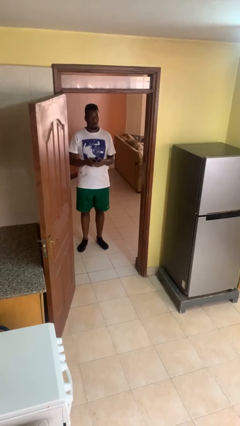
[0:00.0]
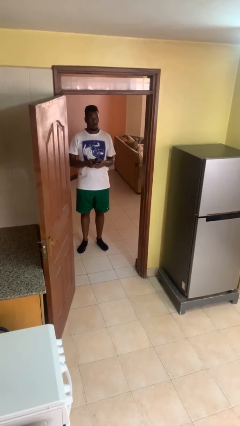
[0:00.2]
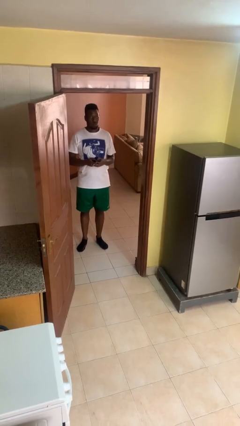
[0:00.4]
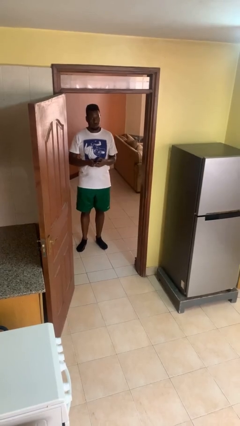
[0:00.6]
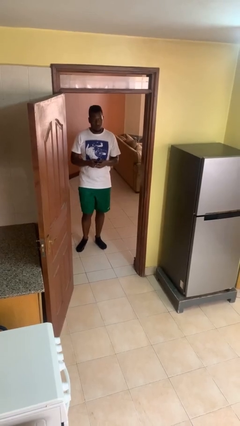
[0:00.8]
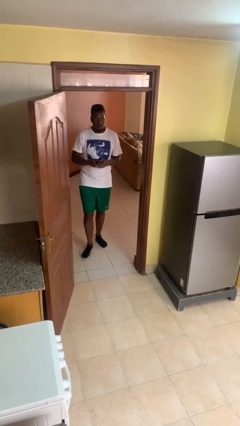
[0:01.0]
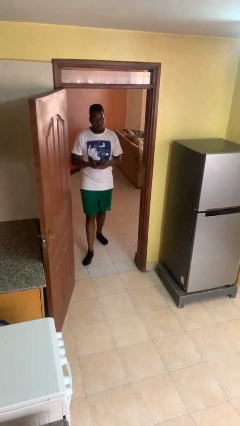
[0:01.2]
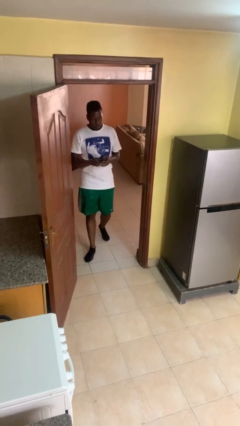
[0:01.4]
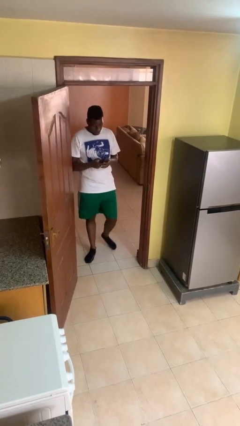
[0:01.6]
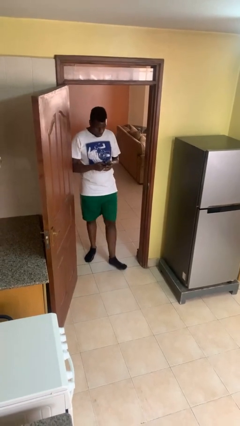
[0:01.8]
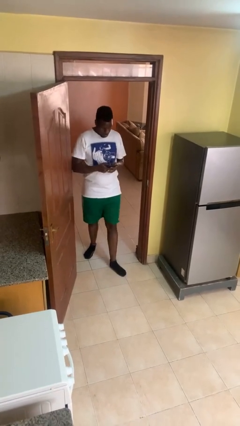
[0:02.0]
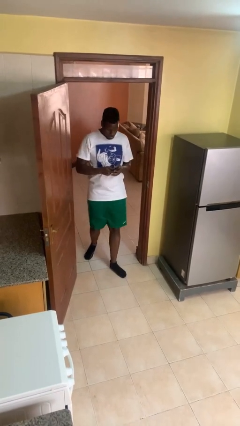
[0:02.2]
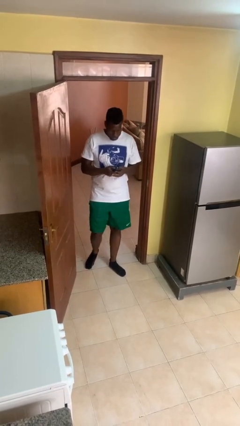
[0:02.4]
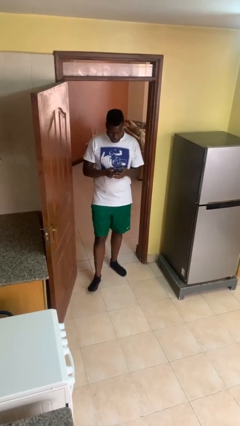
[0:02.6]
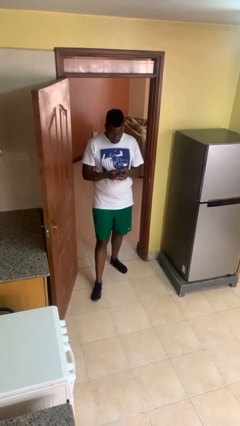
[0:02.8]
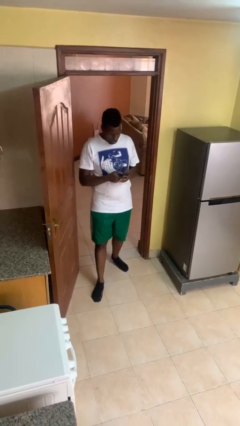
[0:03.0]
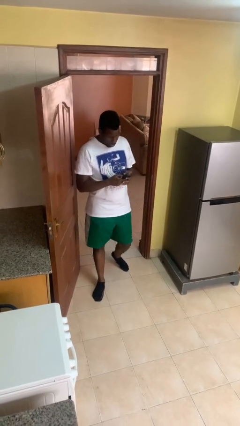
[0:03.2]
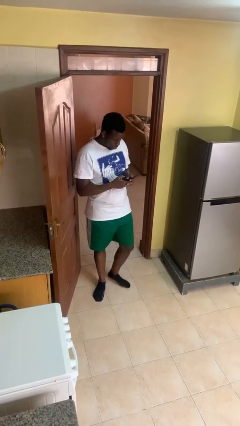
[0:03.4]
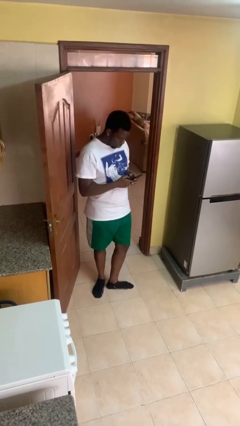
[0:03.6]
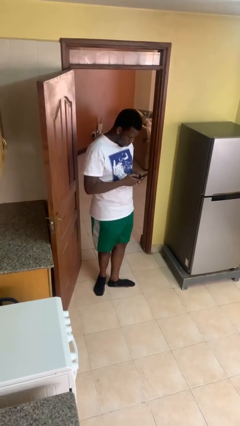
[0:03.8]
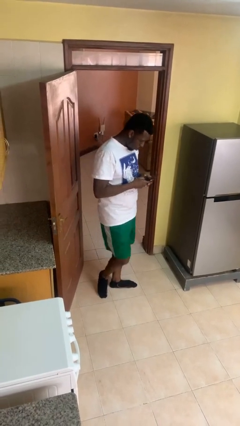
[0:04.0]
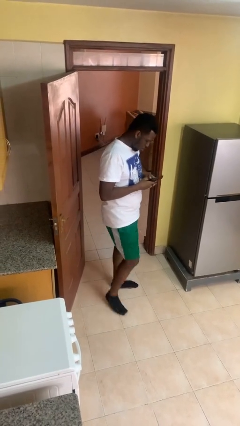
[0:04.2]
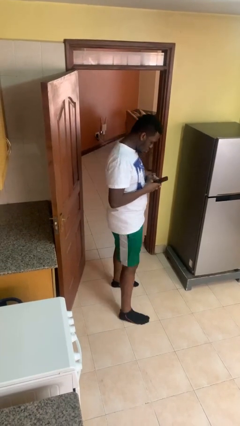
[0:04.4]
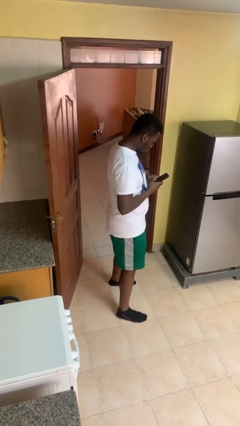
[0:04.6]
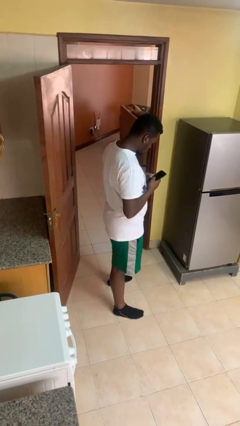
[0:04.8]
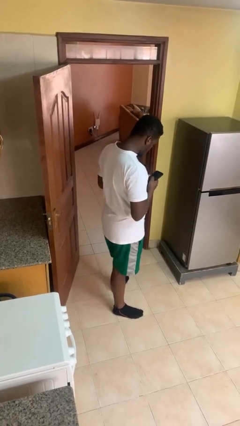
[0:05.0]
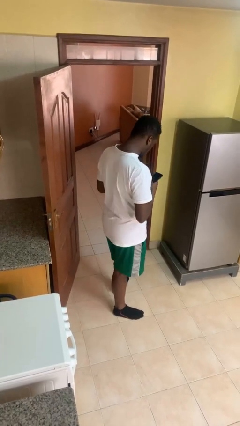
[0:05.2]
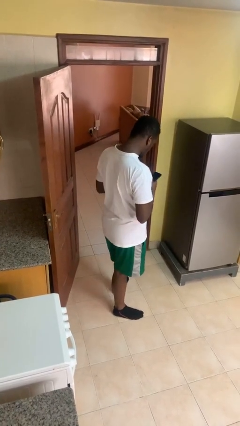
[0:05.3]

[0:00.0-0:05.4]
person enters scene through structure

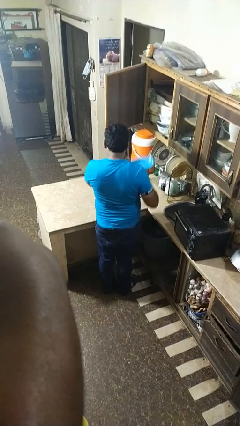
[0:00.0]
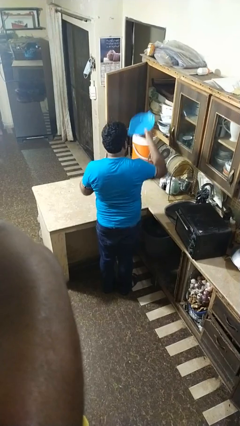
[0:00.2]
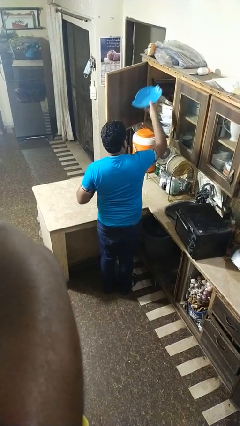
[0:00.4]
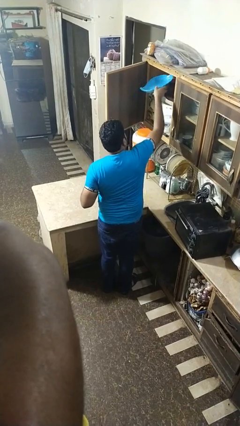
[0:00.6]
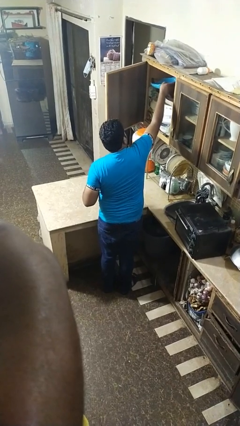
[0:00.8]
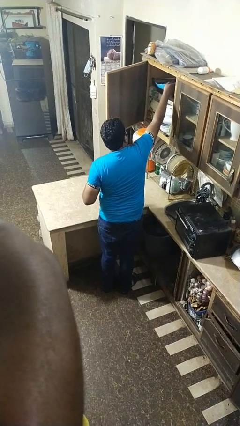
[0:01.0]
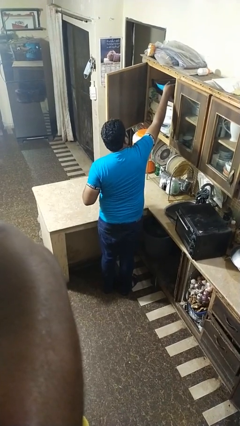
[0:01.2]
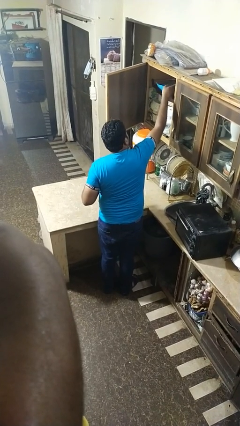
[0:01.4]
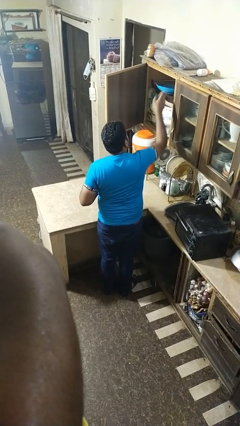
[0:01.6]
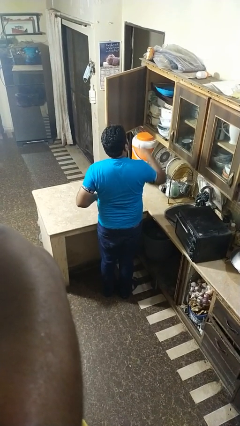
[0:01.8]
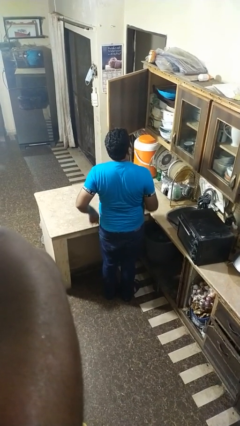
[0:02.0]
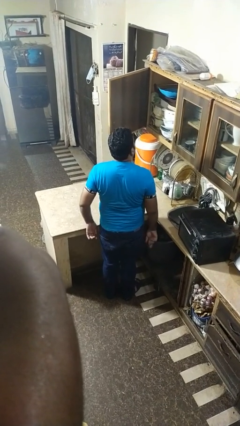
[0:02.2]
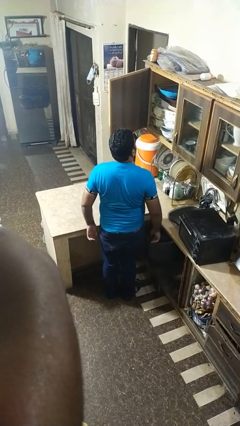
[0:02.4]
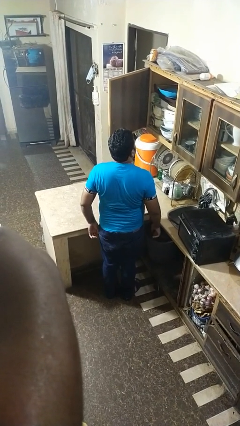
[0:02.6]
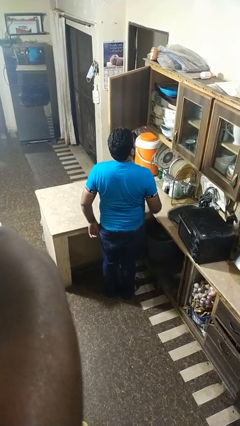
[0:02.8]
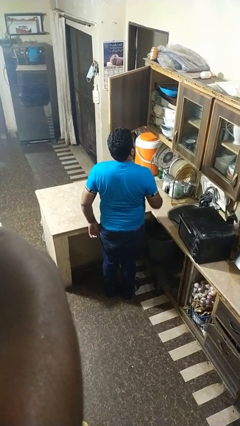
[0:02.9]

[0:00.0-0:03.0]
person takes object from cabinet

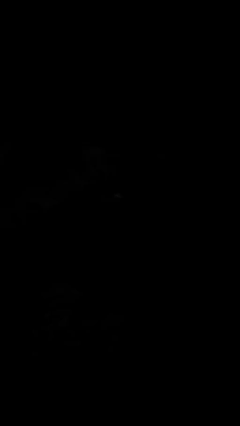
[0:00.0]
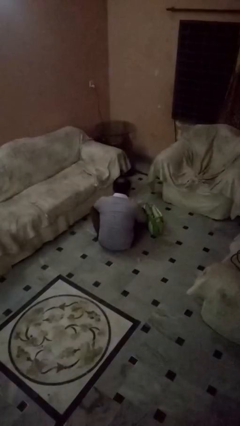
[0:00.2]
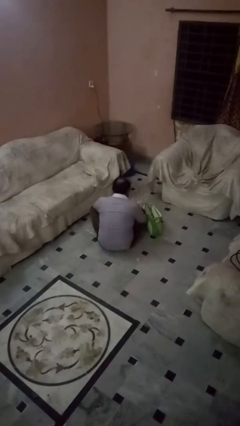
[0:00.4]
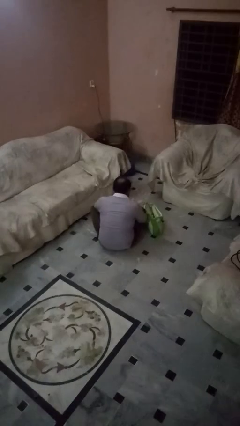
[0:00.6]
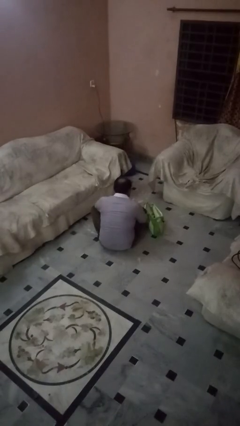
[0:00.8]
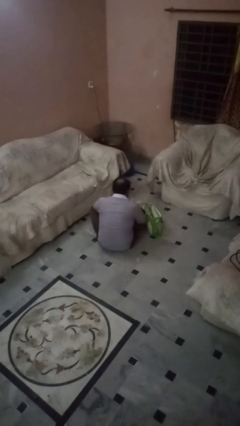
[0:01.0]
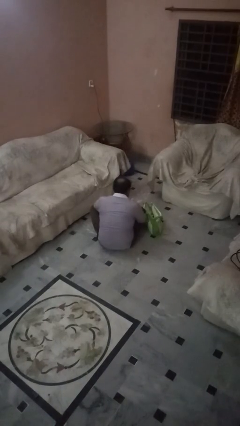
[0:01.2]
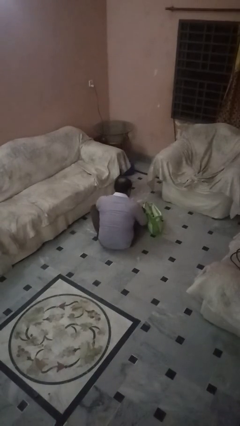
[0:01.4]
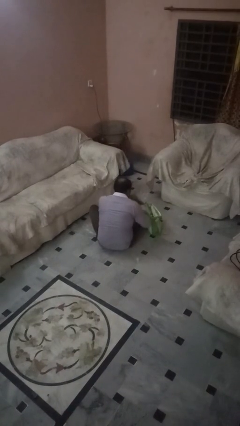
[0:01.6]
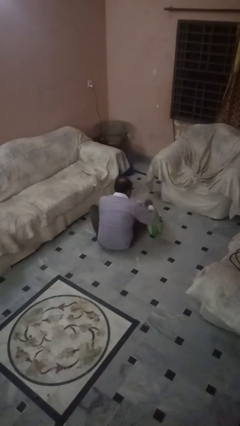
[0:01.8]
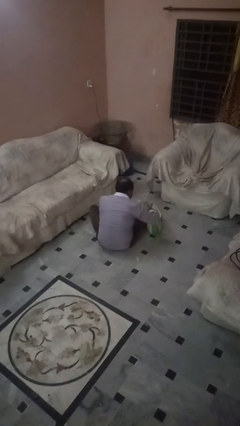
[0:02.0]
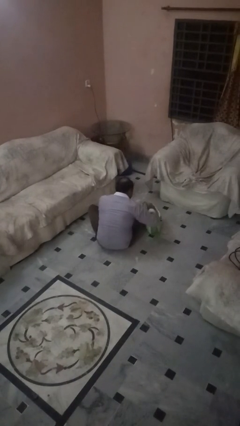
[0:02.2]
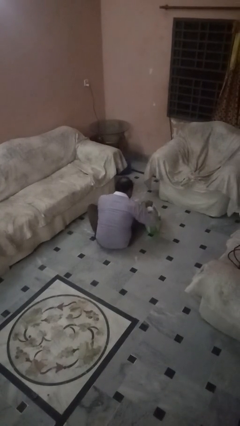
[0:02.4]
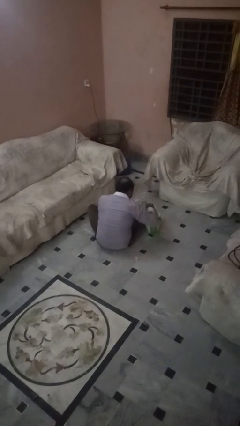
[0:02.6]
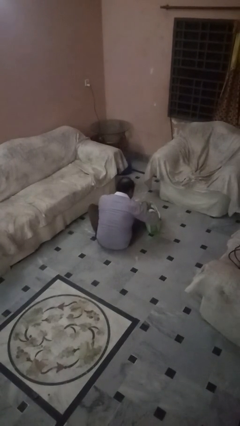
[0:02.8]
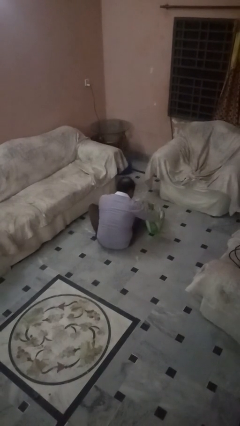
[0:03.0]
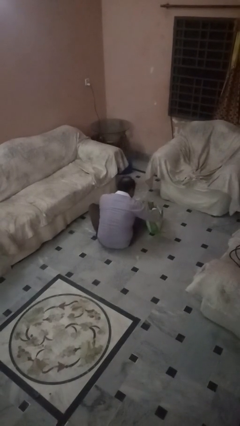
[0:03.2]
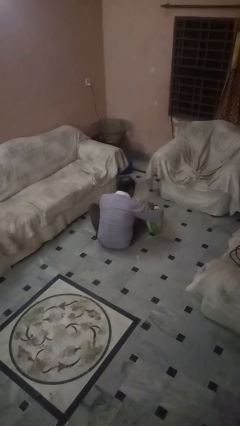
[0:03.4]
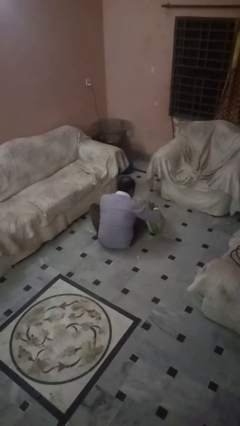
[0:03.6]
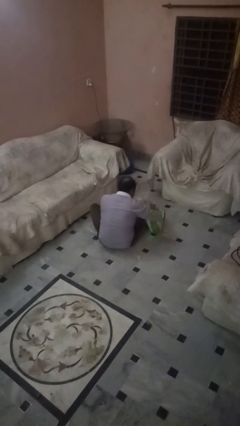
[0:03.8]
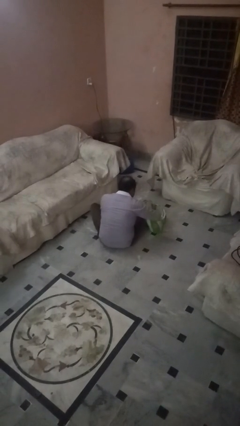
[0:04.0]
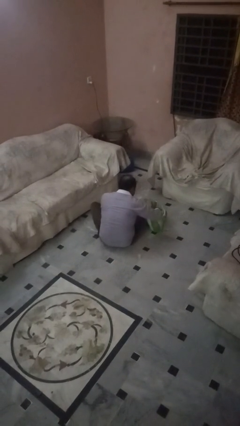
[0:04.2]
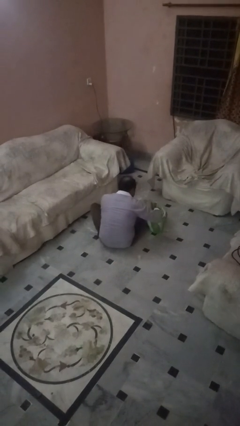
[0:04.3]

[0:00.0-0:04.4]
person searches in bag

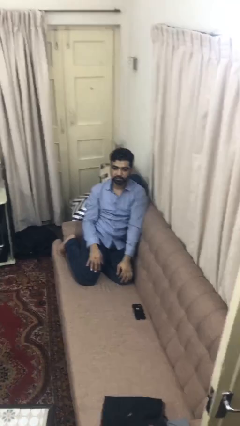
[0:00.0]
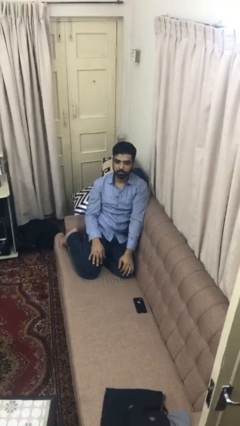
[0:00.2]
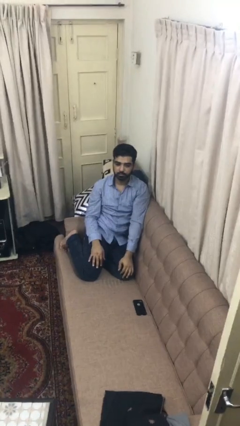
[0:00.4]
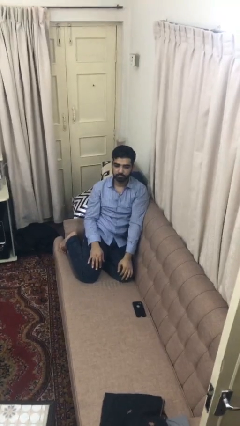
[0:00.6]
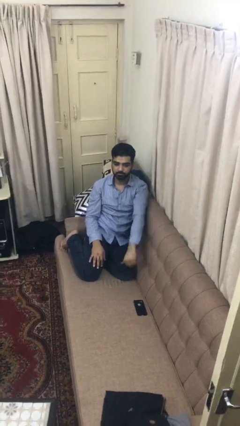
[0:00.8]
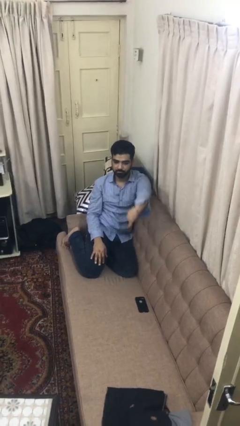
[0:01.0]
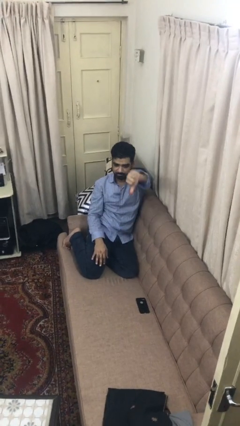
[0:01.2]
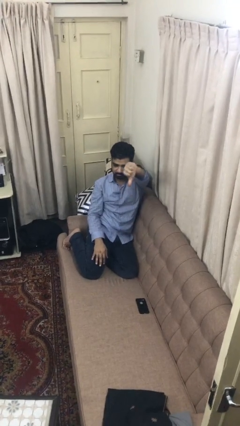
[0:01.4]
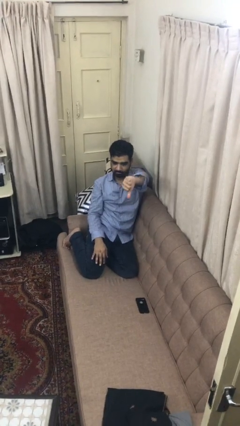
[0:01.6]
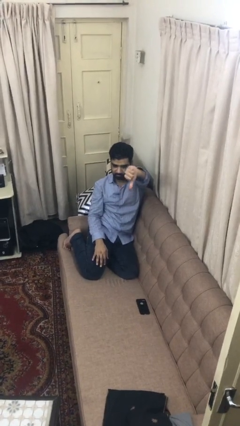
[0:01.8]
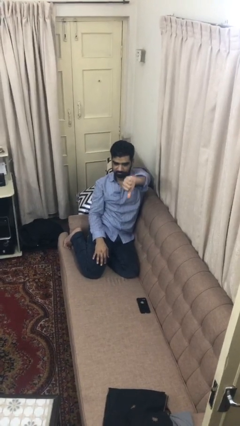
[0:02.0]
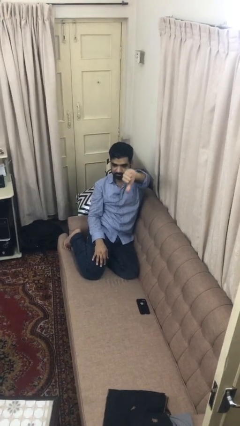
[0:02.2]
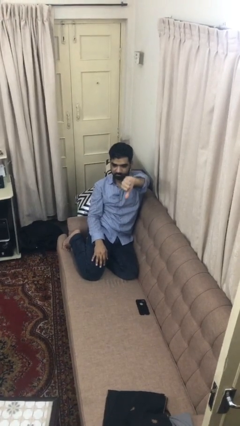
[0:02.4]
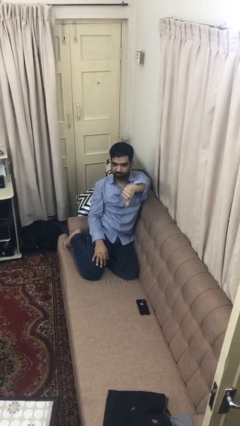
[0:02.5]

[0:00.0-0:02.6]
person gestures thumbs down

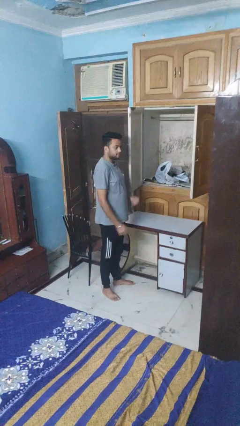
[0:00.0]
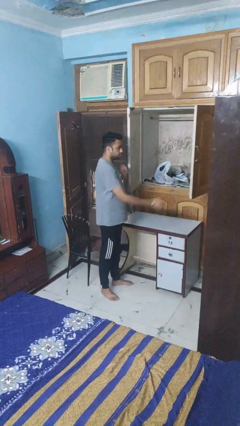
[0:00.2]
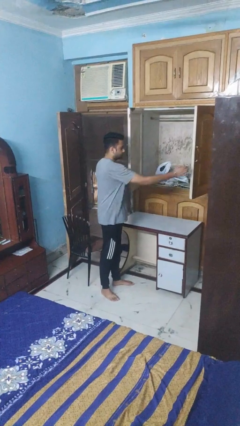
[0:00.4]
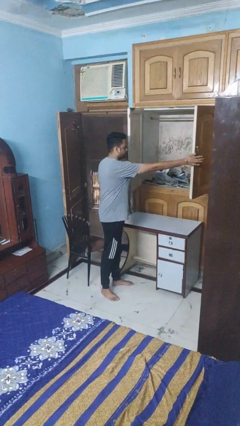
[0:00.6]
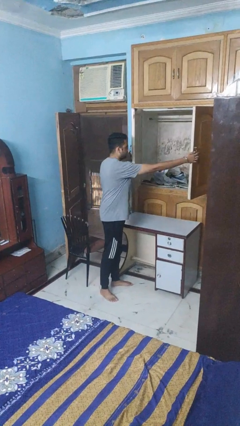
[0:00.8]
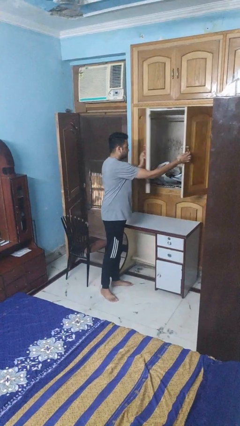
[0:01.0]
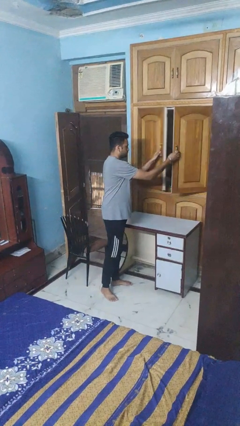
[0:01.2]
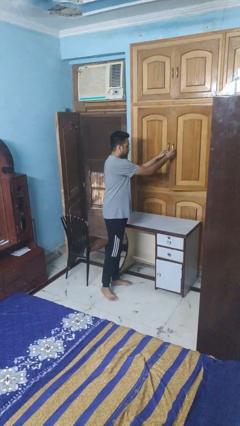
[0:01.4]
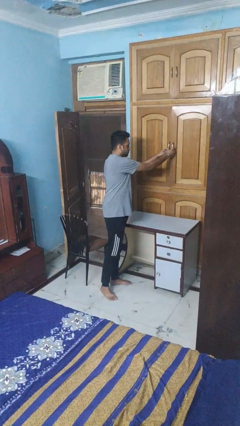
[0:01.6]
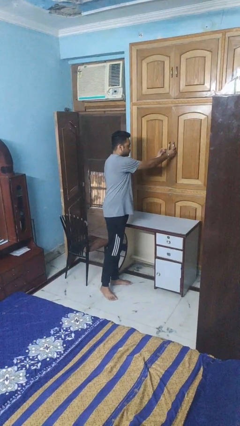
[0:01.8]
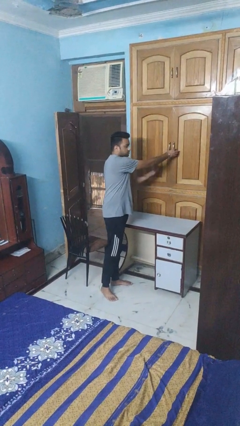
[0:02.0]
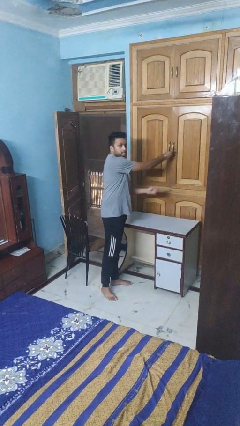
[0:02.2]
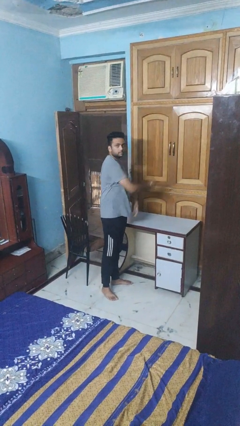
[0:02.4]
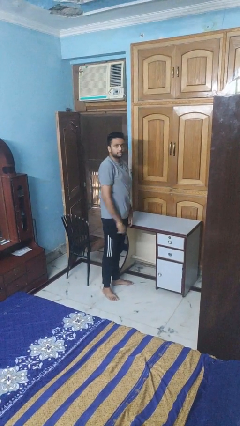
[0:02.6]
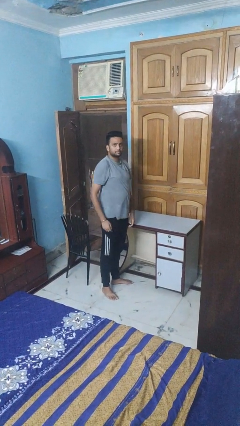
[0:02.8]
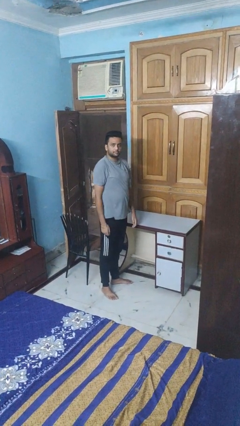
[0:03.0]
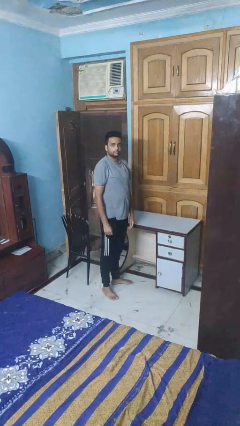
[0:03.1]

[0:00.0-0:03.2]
person closes closet door
